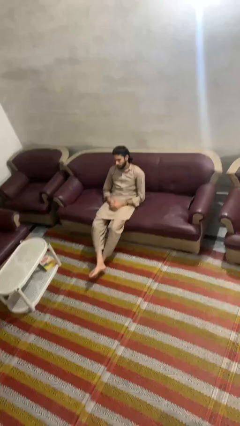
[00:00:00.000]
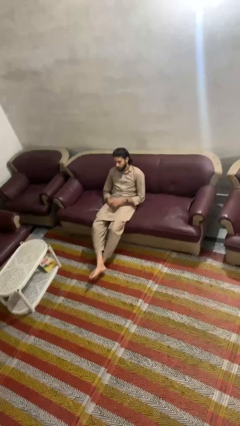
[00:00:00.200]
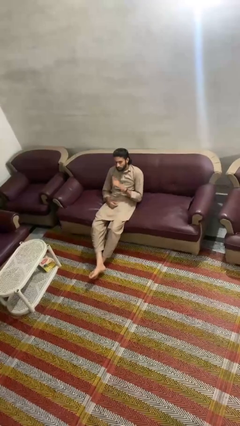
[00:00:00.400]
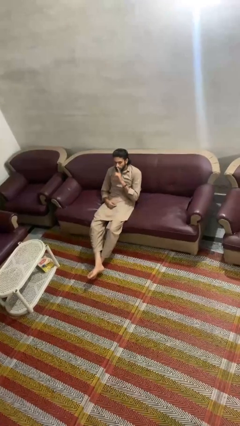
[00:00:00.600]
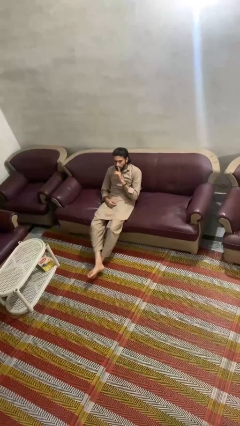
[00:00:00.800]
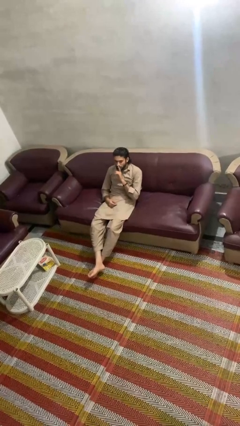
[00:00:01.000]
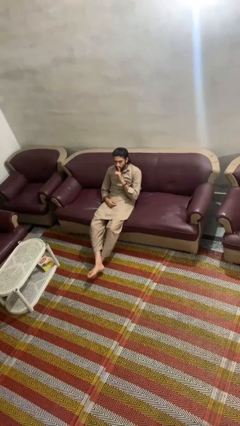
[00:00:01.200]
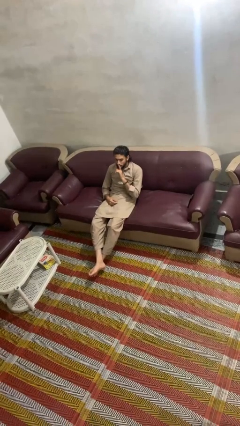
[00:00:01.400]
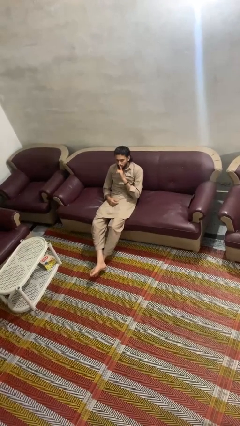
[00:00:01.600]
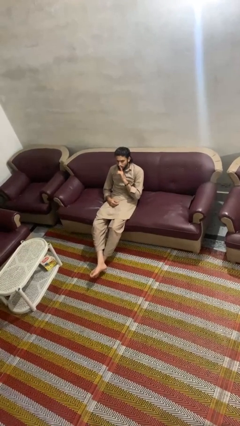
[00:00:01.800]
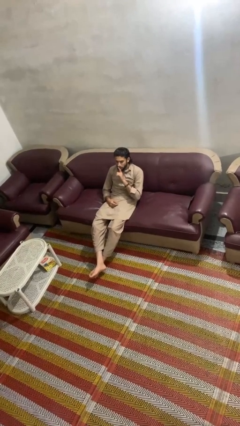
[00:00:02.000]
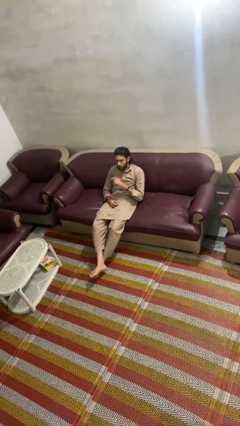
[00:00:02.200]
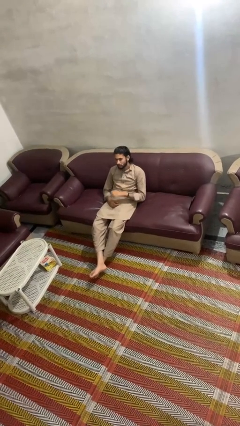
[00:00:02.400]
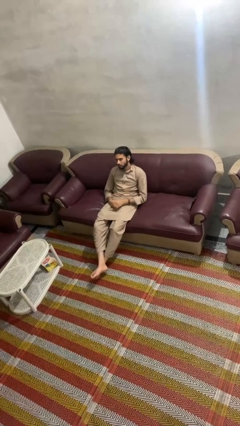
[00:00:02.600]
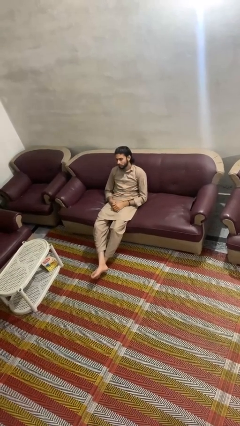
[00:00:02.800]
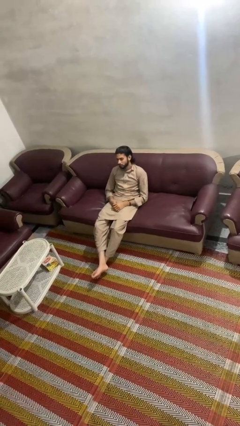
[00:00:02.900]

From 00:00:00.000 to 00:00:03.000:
person gestures be quiet

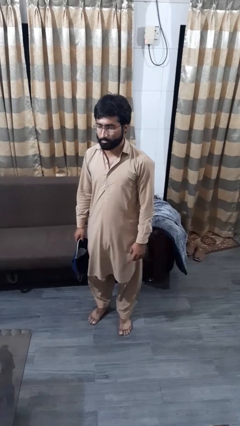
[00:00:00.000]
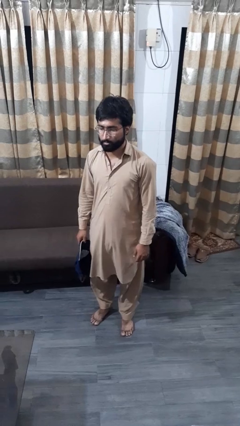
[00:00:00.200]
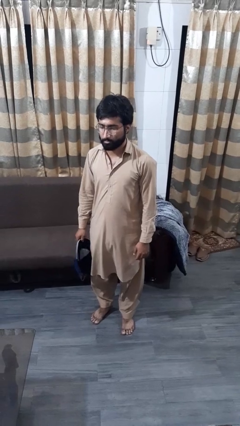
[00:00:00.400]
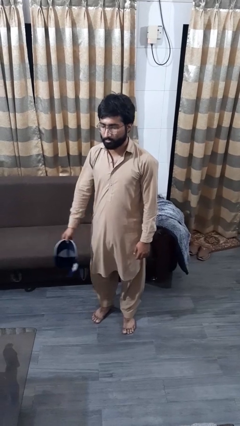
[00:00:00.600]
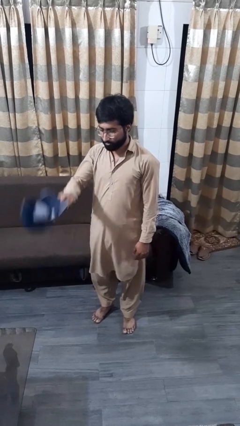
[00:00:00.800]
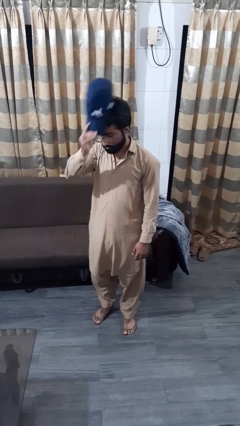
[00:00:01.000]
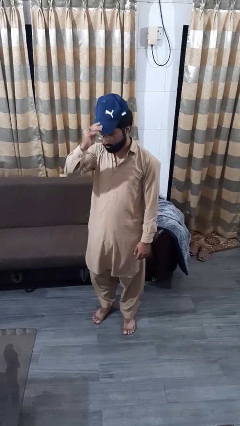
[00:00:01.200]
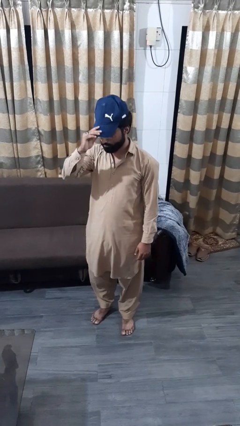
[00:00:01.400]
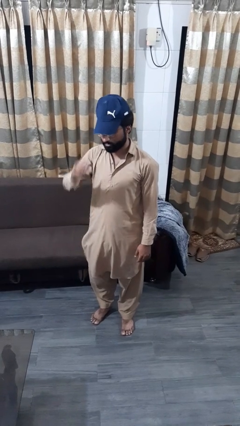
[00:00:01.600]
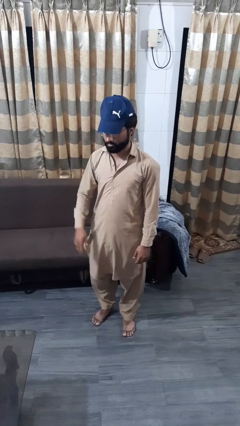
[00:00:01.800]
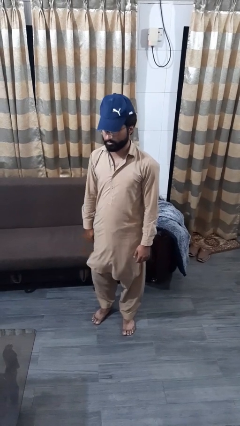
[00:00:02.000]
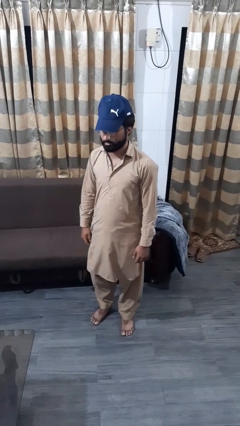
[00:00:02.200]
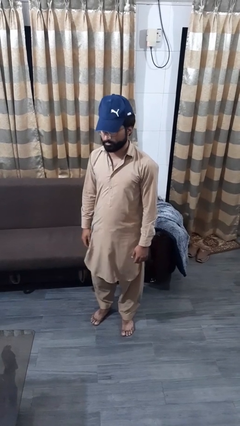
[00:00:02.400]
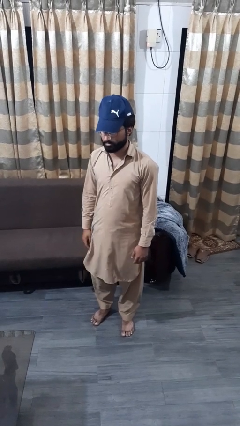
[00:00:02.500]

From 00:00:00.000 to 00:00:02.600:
person puts on hat

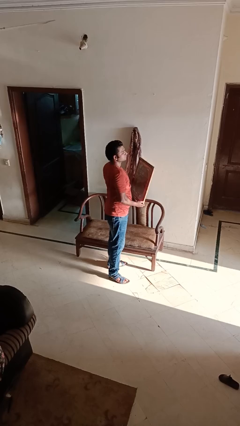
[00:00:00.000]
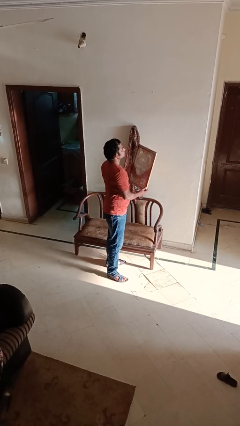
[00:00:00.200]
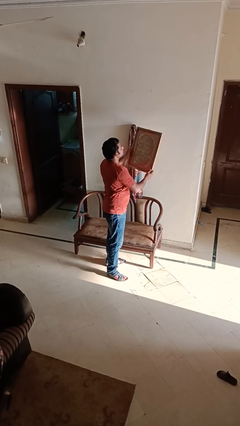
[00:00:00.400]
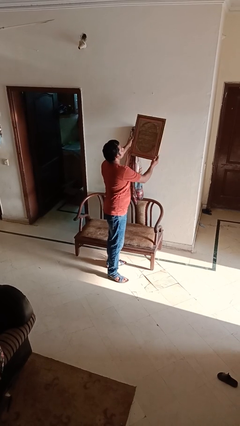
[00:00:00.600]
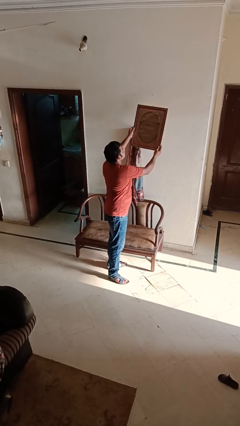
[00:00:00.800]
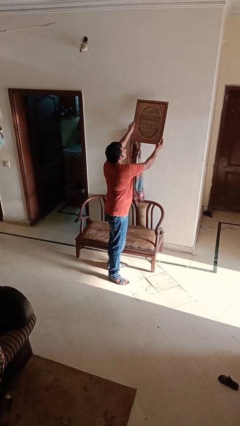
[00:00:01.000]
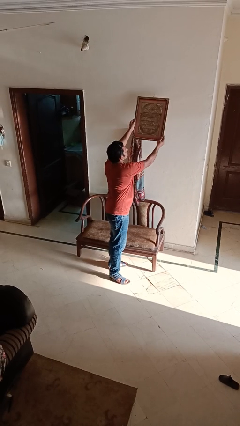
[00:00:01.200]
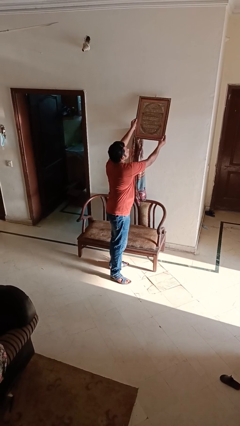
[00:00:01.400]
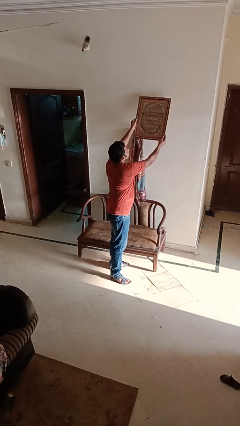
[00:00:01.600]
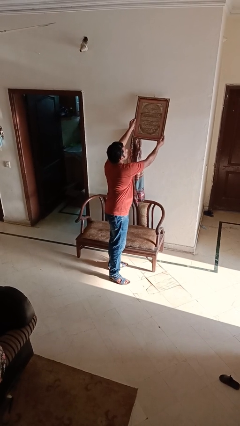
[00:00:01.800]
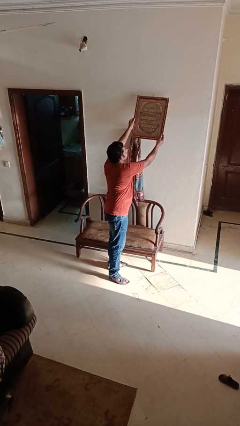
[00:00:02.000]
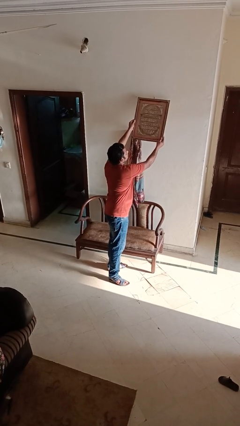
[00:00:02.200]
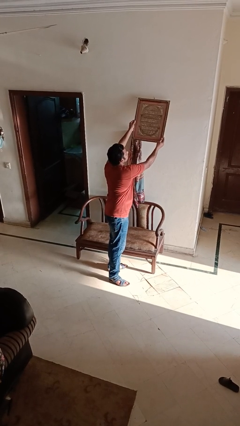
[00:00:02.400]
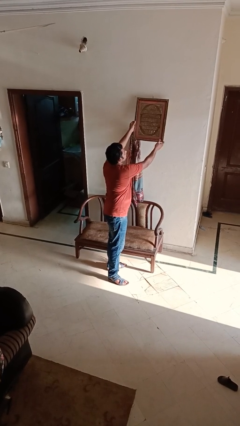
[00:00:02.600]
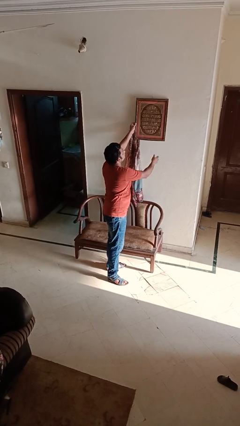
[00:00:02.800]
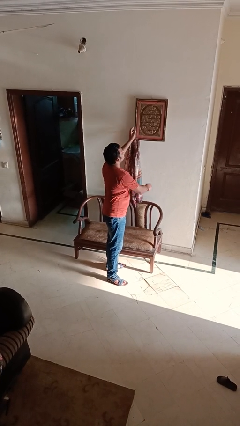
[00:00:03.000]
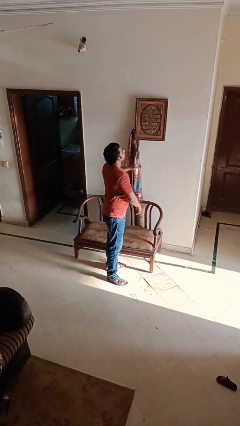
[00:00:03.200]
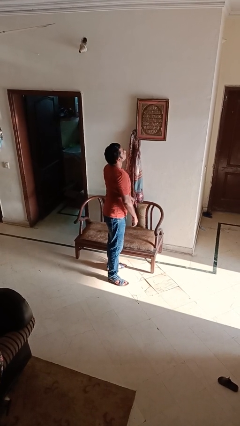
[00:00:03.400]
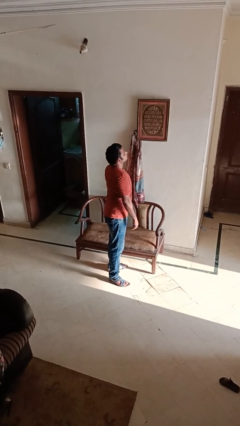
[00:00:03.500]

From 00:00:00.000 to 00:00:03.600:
person puts up picture frame

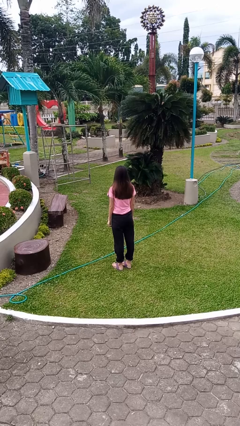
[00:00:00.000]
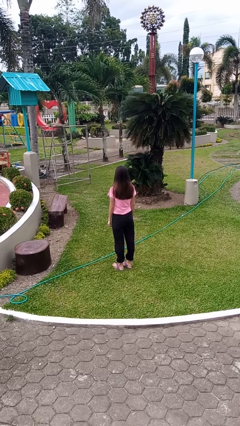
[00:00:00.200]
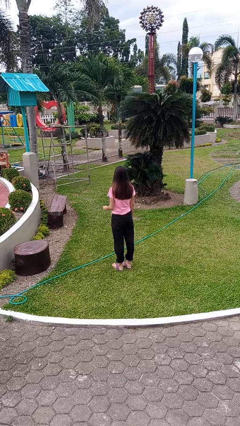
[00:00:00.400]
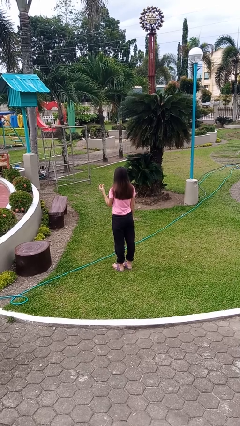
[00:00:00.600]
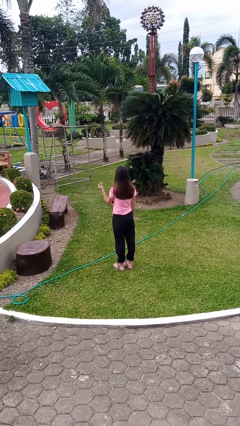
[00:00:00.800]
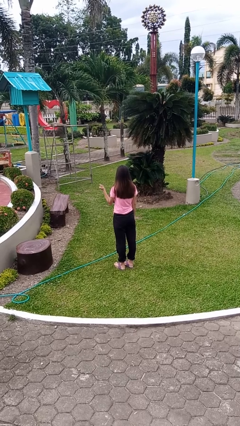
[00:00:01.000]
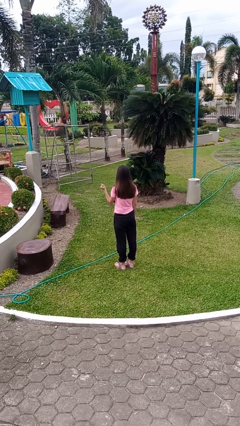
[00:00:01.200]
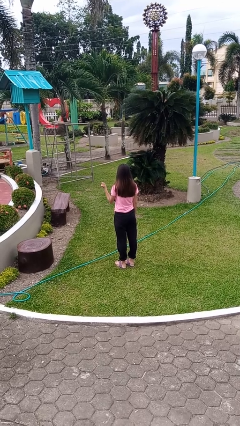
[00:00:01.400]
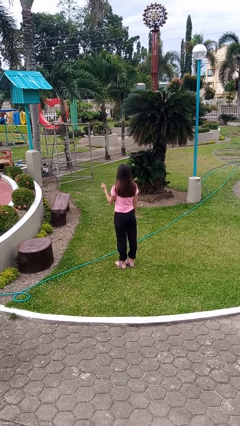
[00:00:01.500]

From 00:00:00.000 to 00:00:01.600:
person snaps fingers

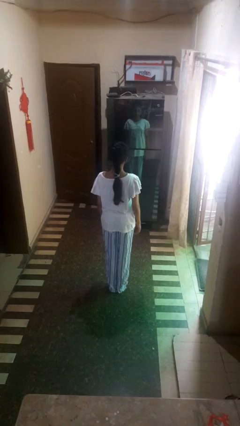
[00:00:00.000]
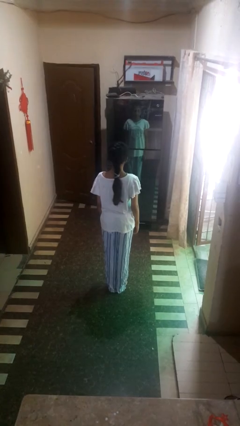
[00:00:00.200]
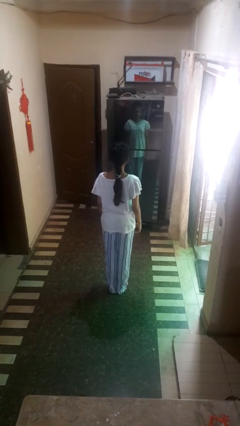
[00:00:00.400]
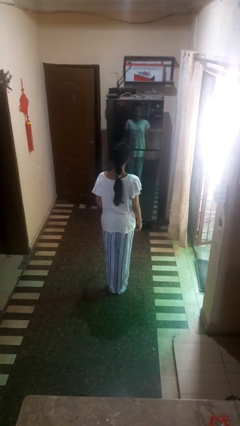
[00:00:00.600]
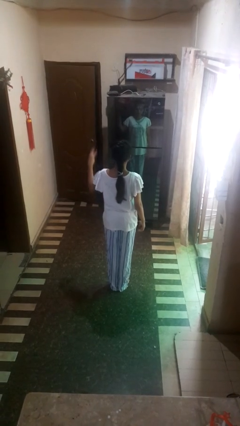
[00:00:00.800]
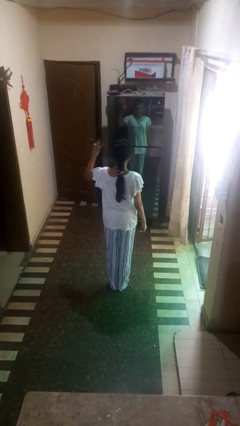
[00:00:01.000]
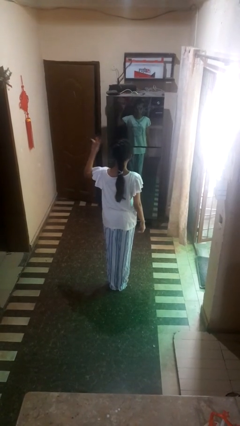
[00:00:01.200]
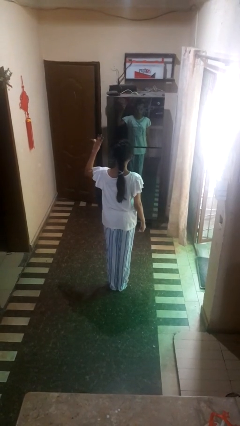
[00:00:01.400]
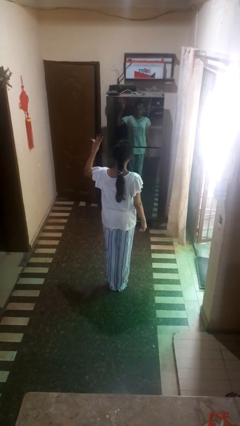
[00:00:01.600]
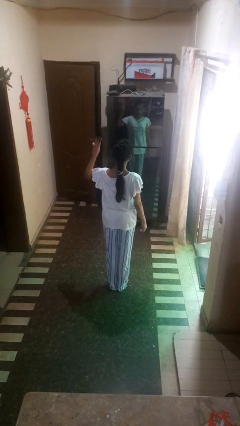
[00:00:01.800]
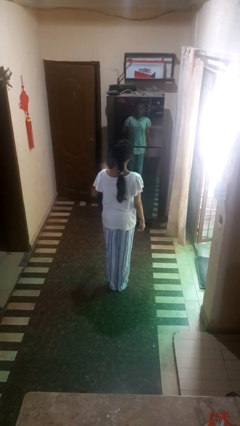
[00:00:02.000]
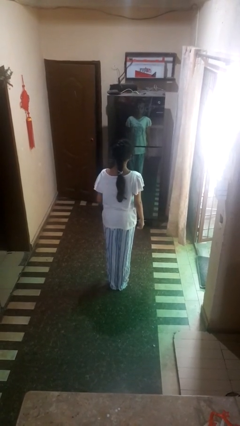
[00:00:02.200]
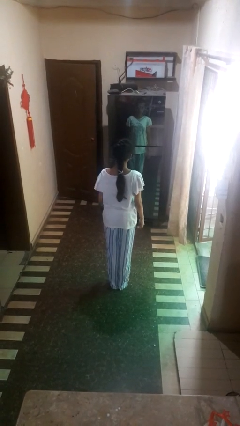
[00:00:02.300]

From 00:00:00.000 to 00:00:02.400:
person gestures number three

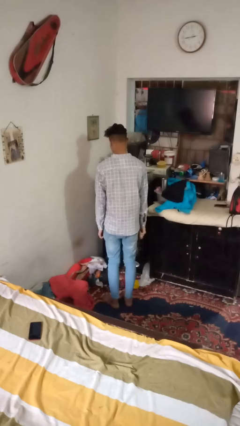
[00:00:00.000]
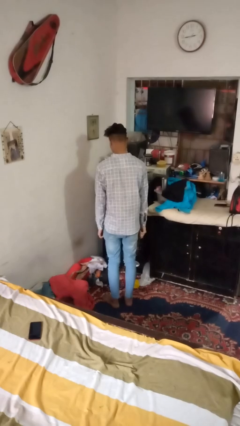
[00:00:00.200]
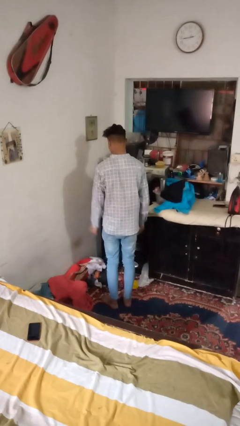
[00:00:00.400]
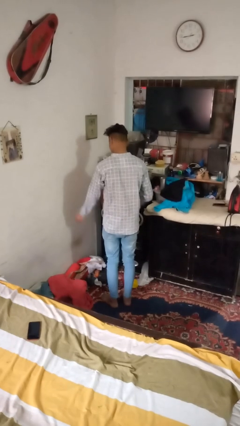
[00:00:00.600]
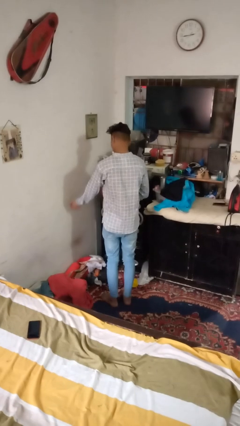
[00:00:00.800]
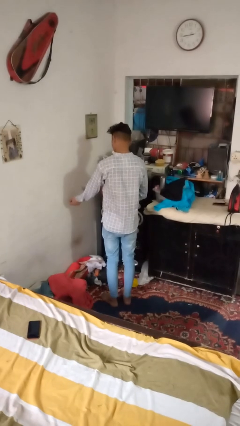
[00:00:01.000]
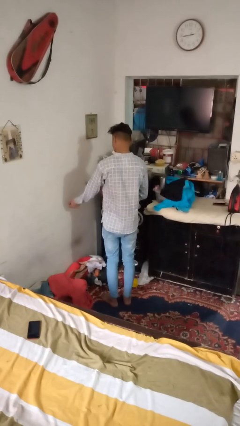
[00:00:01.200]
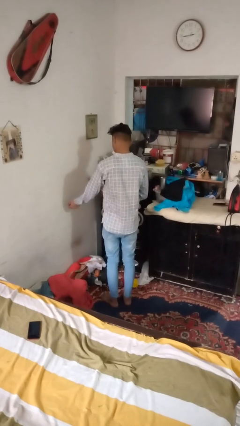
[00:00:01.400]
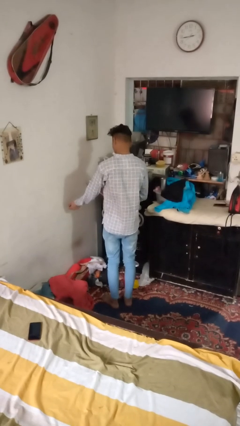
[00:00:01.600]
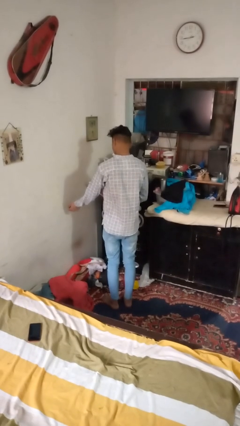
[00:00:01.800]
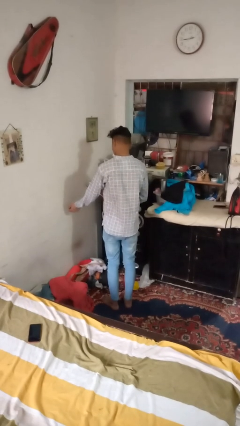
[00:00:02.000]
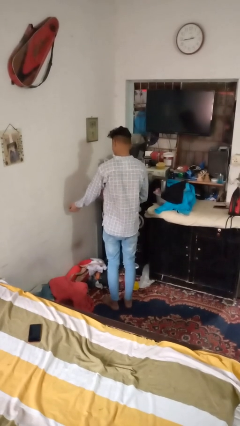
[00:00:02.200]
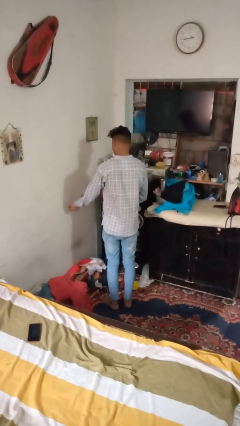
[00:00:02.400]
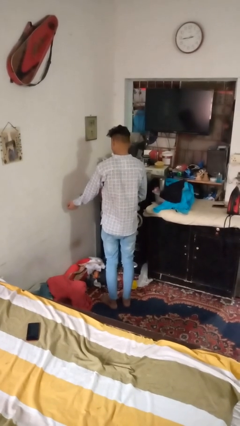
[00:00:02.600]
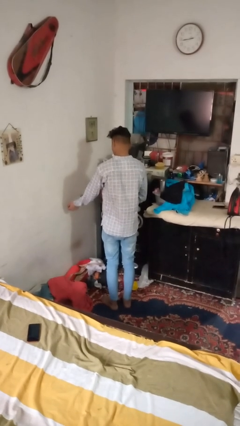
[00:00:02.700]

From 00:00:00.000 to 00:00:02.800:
person swats bug

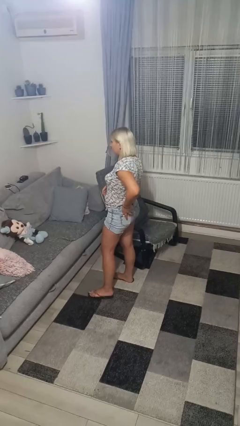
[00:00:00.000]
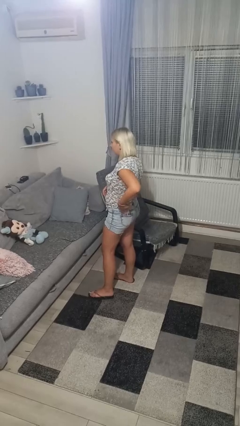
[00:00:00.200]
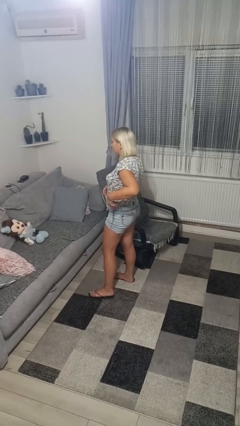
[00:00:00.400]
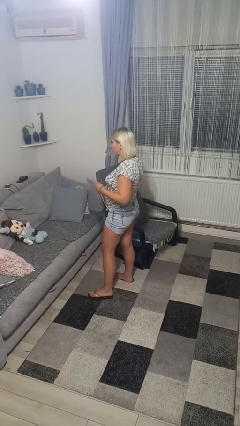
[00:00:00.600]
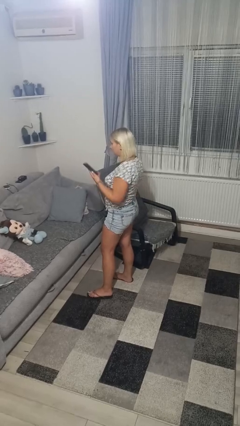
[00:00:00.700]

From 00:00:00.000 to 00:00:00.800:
person takes phone from pocket

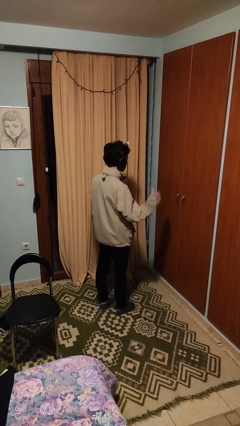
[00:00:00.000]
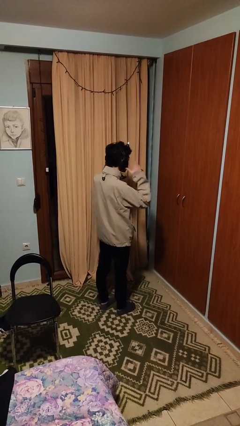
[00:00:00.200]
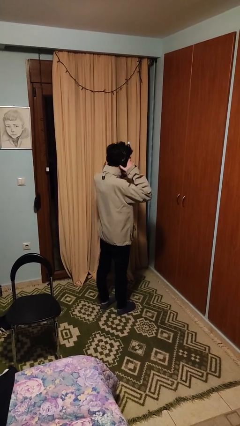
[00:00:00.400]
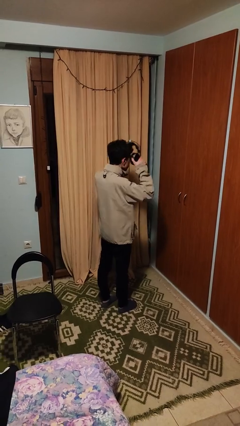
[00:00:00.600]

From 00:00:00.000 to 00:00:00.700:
person takes off headphones
